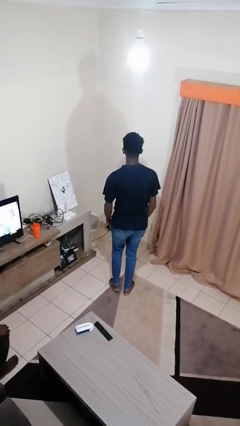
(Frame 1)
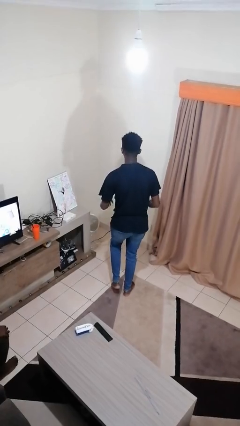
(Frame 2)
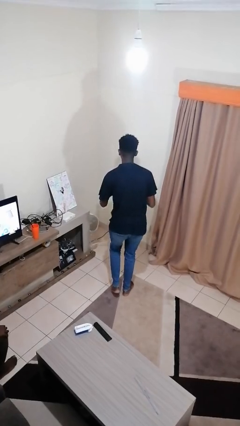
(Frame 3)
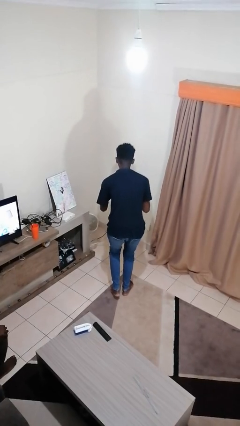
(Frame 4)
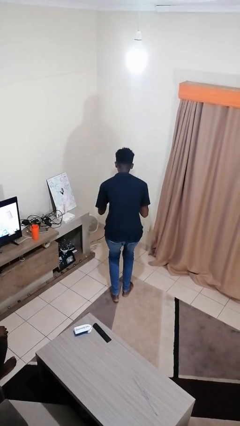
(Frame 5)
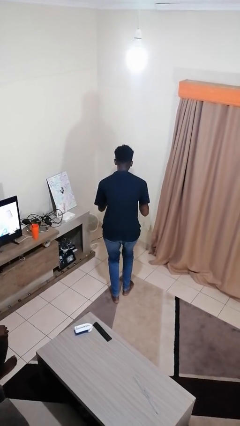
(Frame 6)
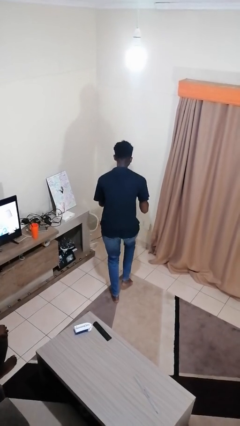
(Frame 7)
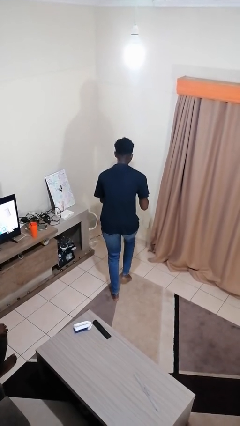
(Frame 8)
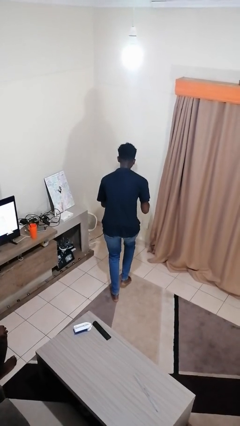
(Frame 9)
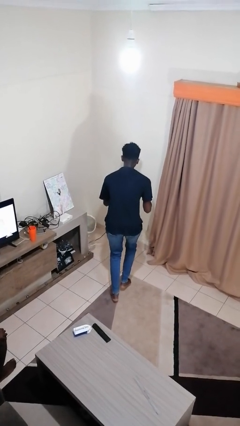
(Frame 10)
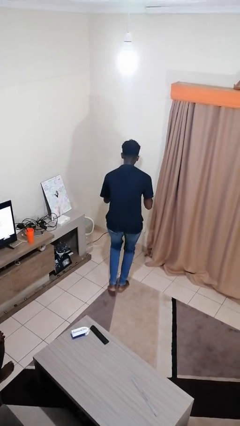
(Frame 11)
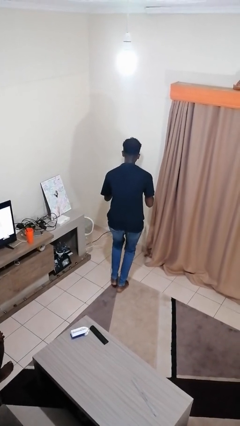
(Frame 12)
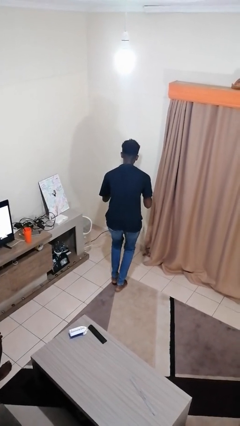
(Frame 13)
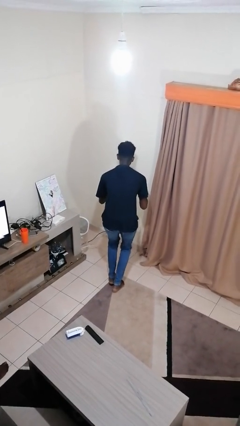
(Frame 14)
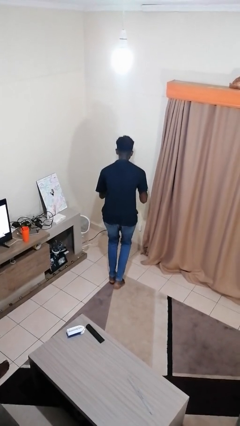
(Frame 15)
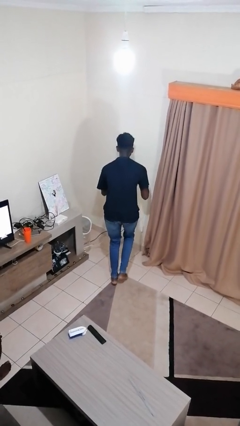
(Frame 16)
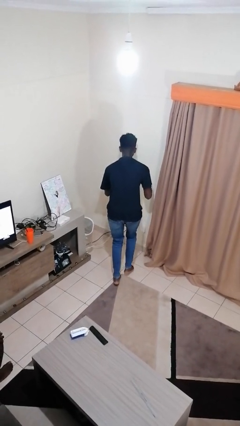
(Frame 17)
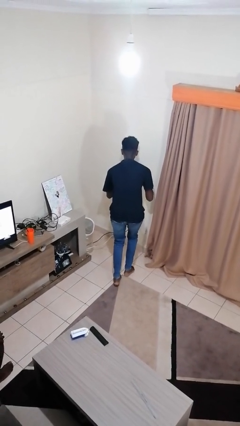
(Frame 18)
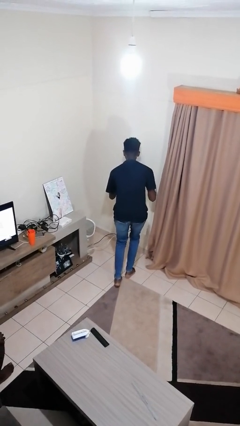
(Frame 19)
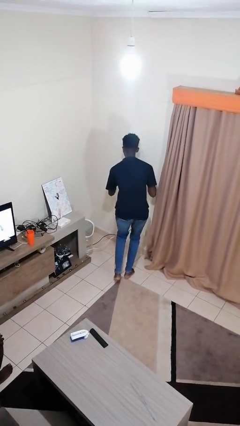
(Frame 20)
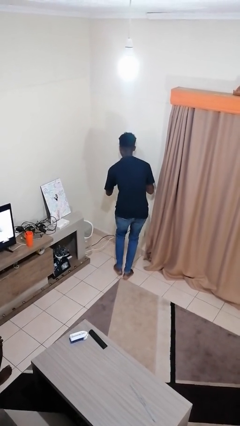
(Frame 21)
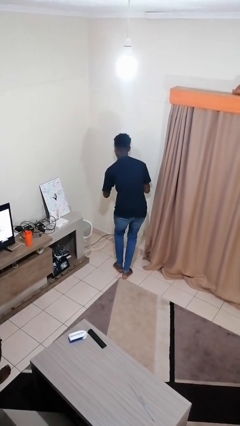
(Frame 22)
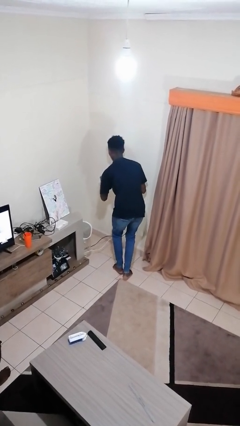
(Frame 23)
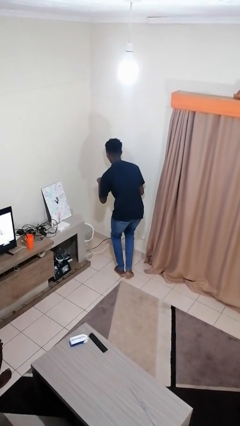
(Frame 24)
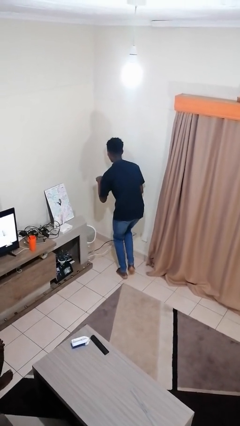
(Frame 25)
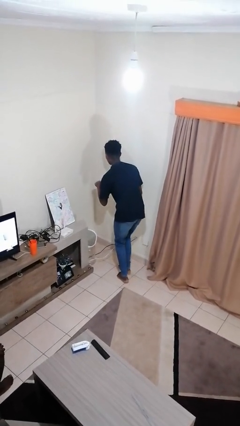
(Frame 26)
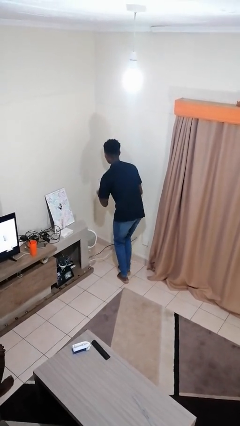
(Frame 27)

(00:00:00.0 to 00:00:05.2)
person walks tiptoe

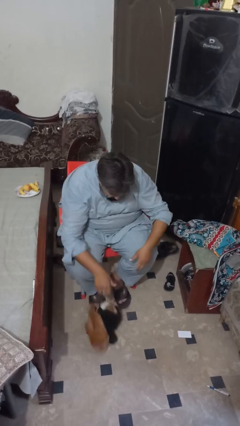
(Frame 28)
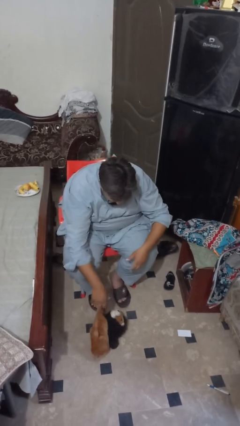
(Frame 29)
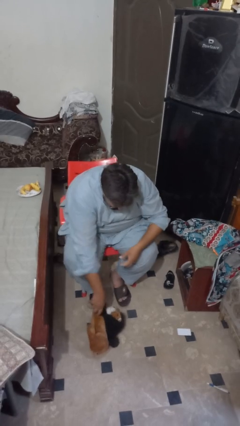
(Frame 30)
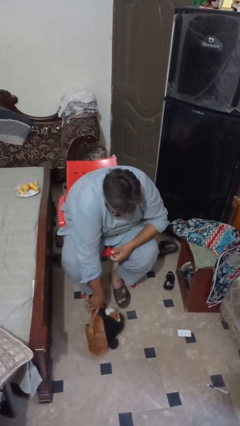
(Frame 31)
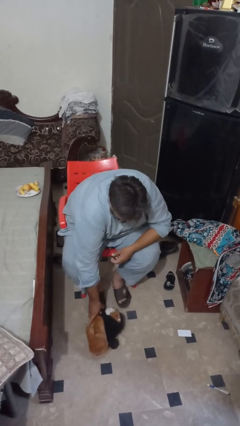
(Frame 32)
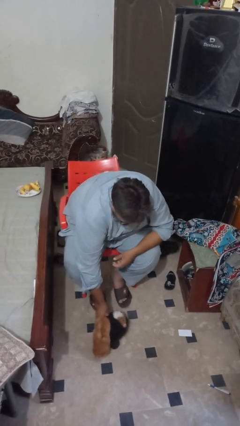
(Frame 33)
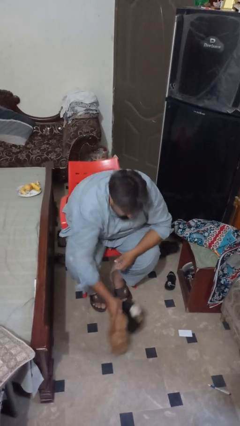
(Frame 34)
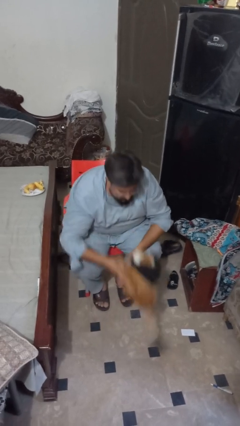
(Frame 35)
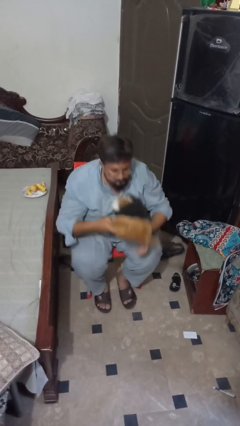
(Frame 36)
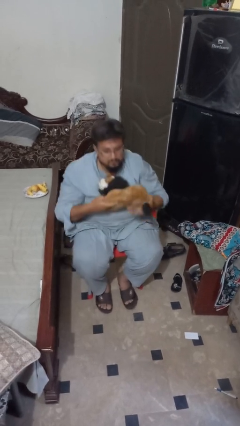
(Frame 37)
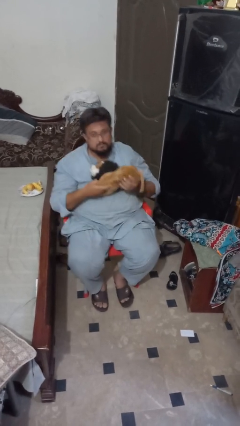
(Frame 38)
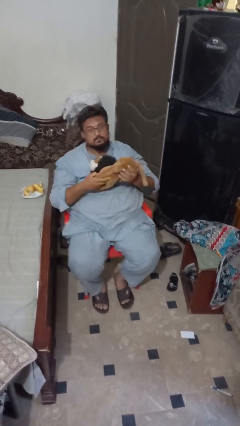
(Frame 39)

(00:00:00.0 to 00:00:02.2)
person picks up object from floor

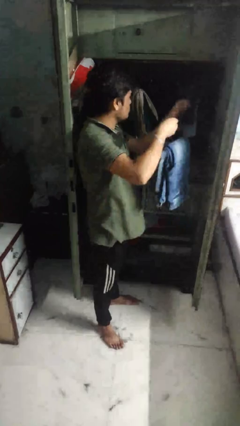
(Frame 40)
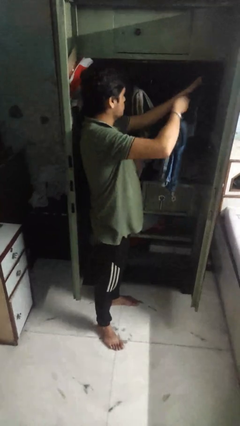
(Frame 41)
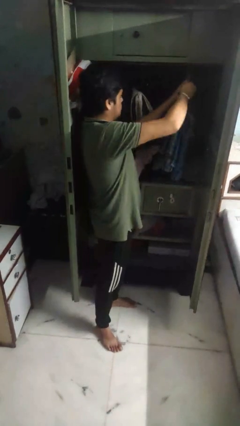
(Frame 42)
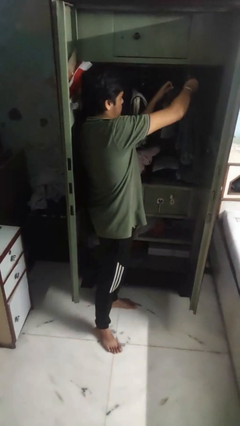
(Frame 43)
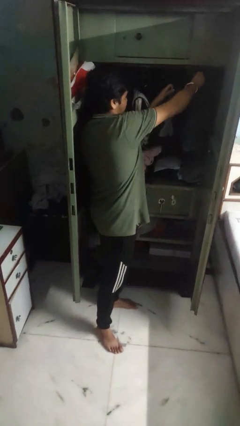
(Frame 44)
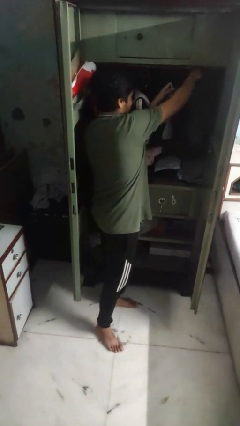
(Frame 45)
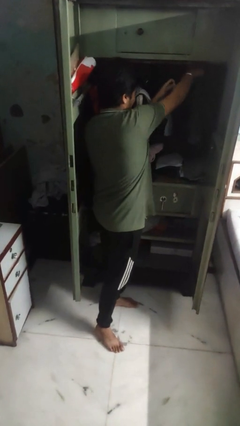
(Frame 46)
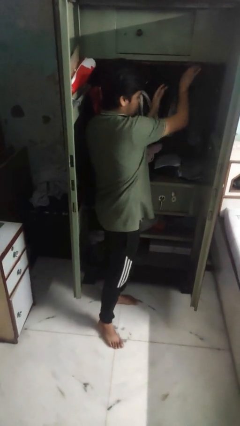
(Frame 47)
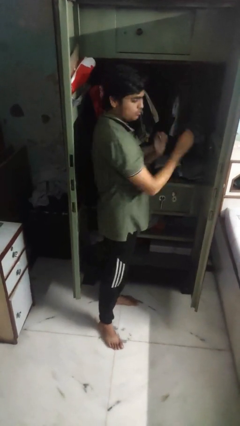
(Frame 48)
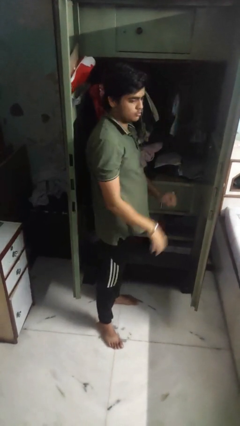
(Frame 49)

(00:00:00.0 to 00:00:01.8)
person puts clothes into closet

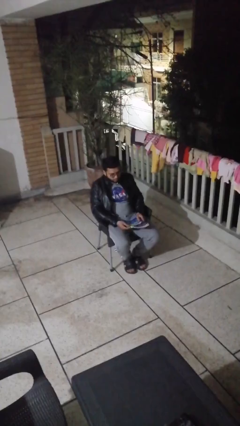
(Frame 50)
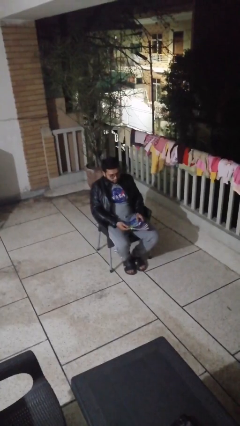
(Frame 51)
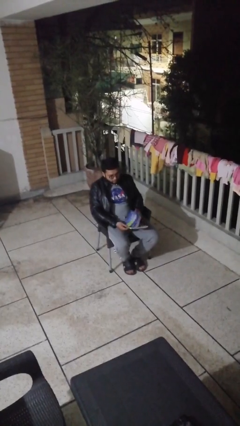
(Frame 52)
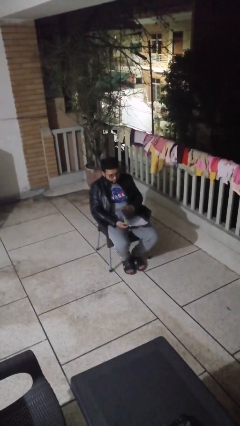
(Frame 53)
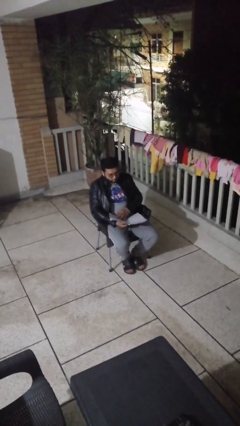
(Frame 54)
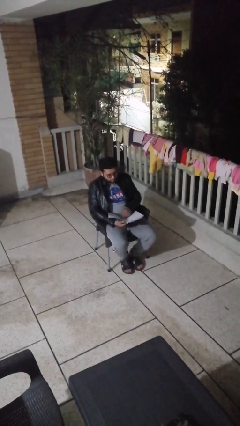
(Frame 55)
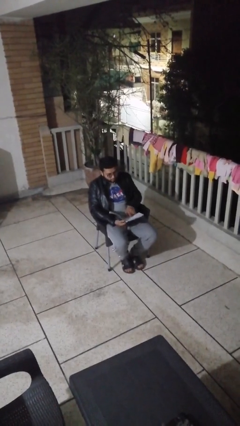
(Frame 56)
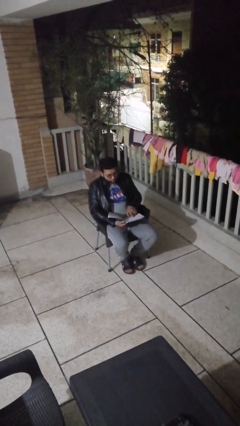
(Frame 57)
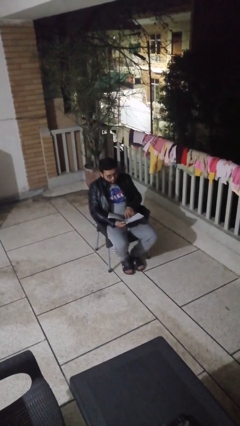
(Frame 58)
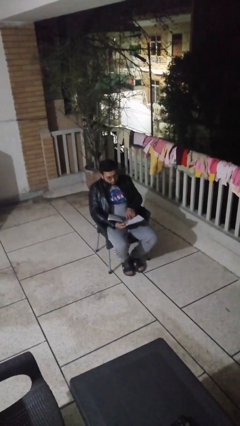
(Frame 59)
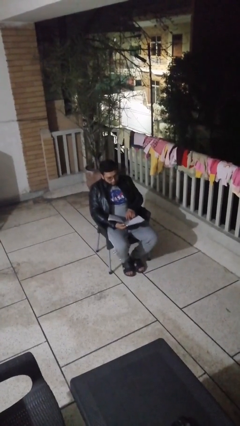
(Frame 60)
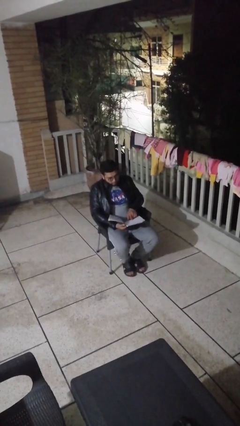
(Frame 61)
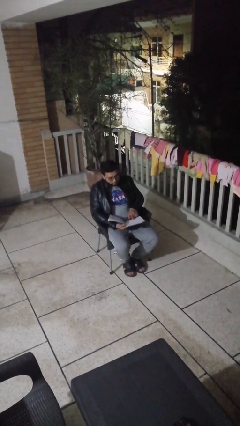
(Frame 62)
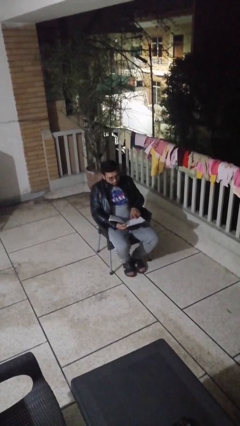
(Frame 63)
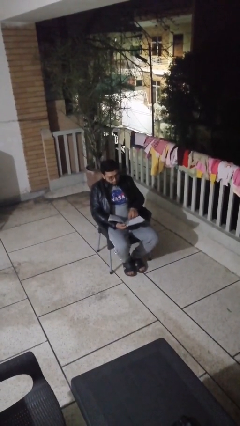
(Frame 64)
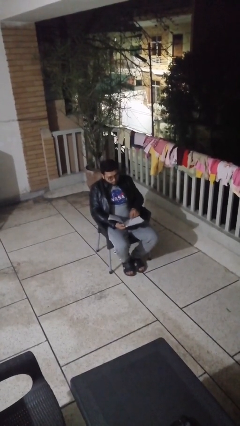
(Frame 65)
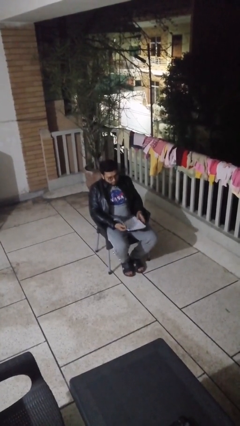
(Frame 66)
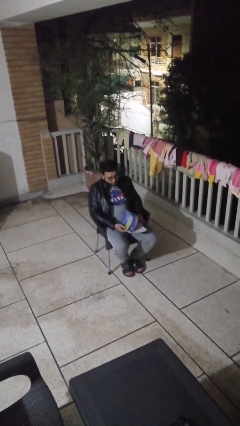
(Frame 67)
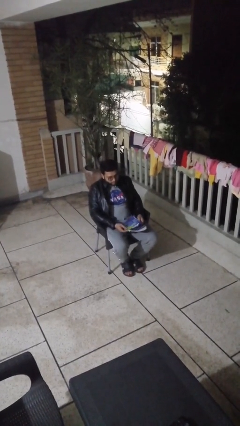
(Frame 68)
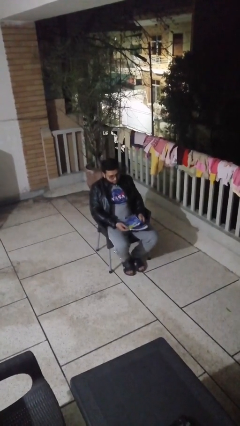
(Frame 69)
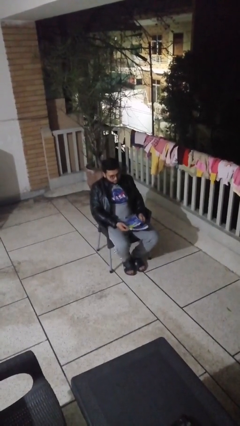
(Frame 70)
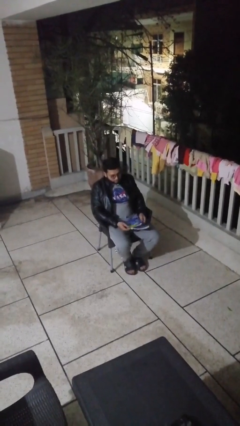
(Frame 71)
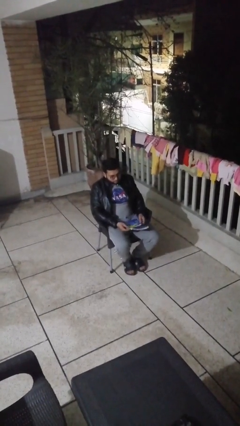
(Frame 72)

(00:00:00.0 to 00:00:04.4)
person reads document

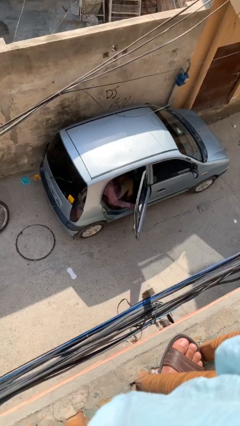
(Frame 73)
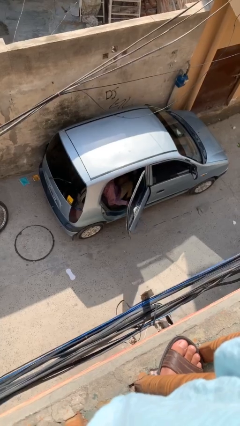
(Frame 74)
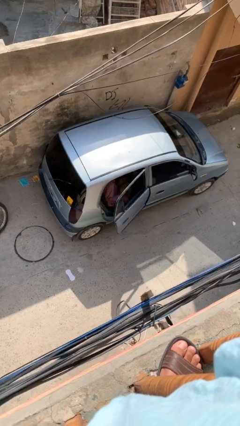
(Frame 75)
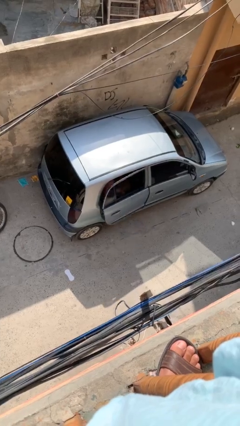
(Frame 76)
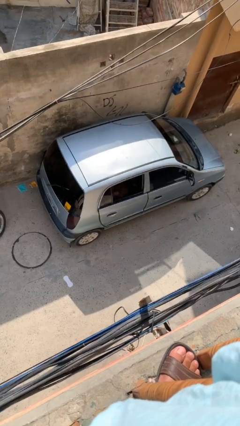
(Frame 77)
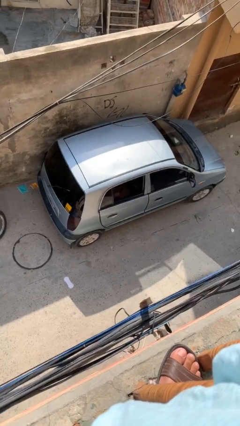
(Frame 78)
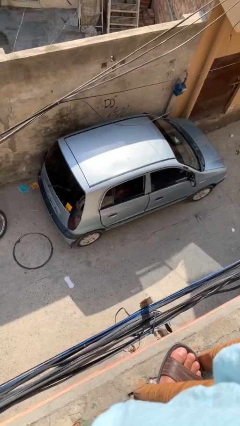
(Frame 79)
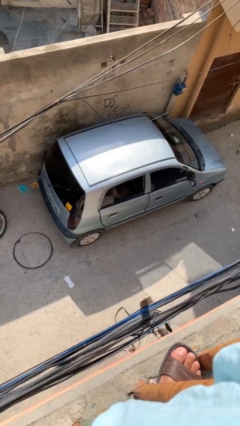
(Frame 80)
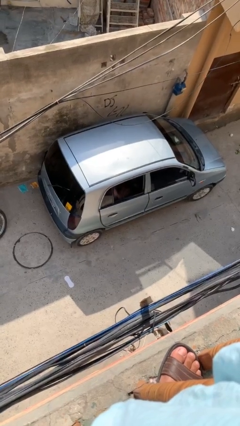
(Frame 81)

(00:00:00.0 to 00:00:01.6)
person closes car door

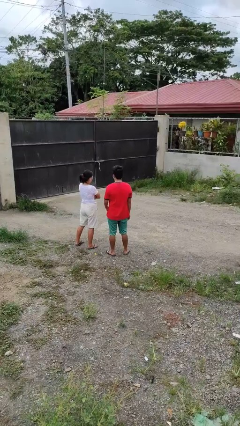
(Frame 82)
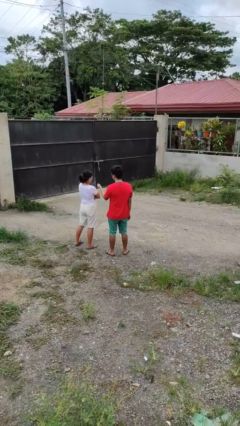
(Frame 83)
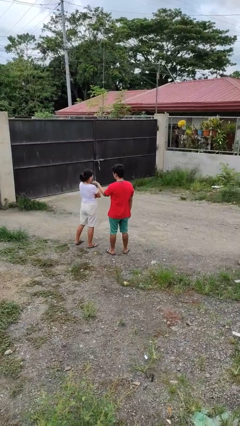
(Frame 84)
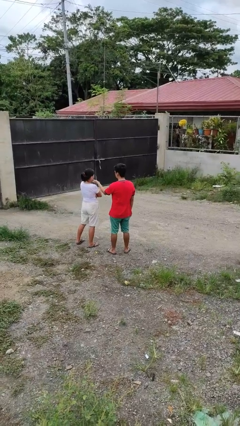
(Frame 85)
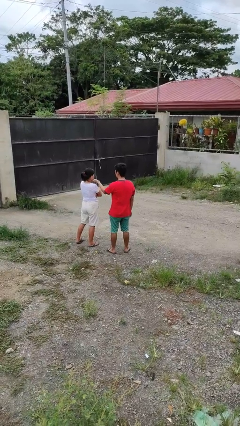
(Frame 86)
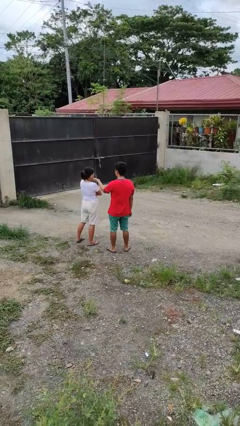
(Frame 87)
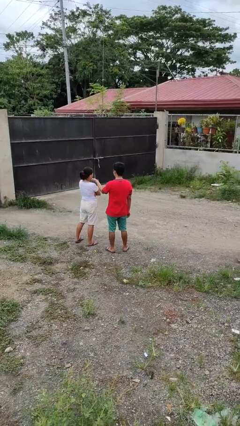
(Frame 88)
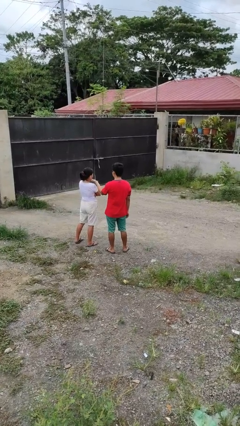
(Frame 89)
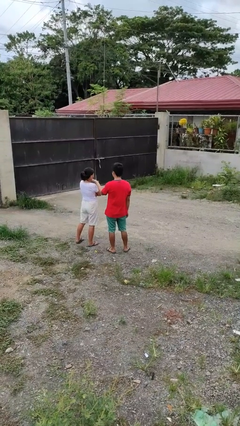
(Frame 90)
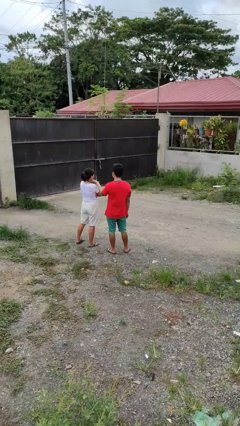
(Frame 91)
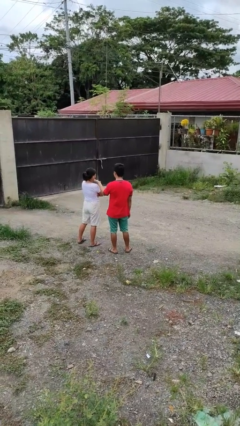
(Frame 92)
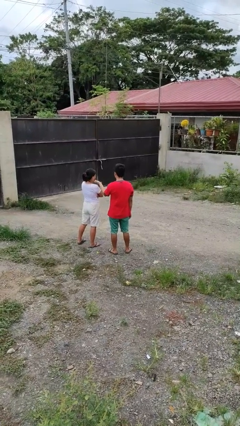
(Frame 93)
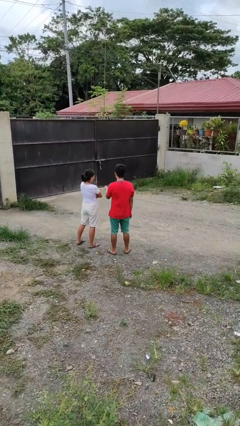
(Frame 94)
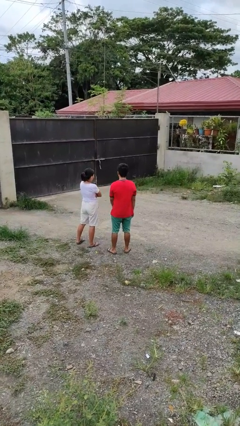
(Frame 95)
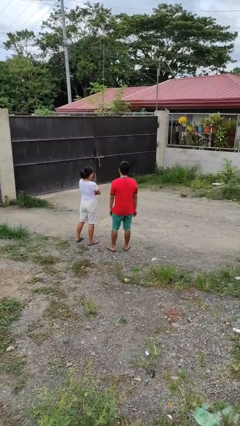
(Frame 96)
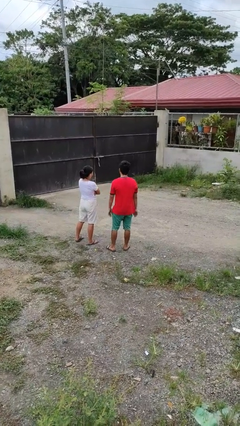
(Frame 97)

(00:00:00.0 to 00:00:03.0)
person touches face of person
